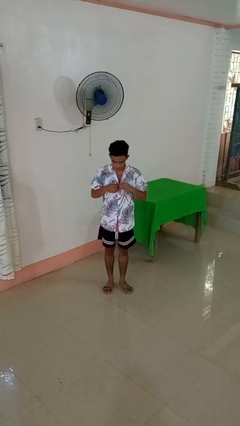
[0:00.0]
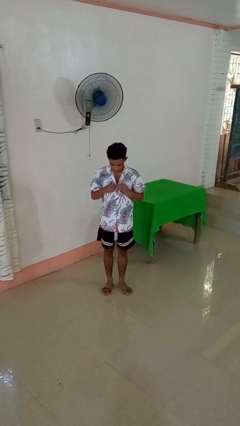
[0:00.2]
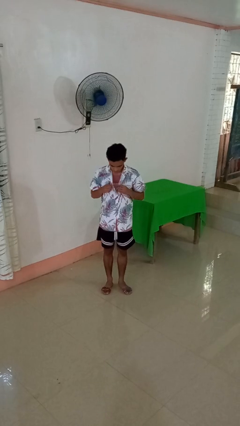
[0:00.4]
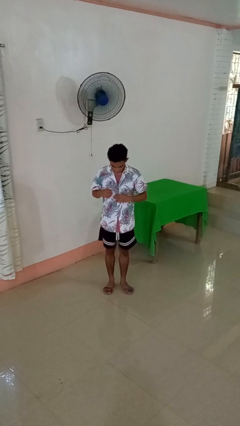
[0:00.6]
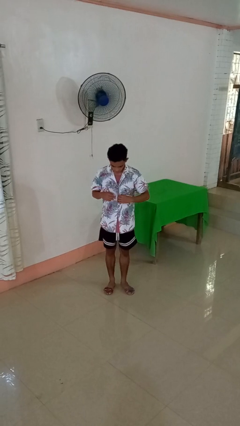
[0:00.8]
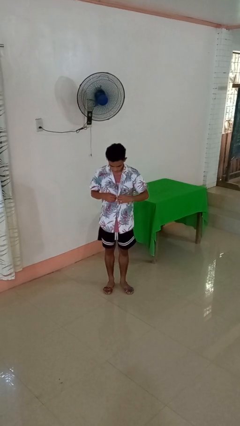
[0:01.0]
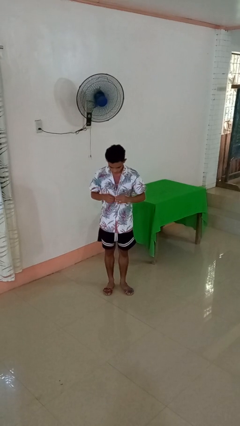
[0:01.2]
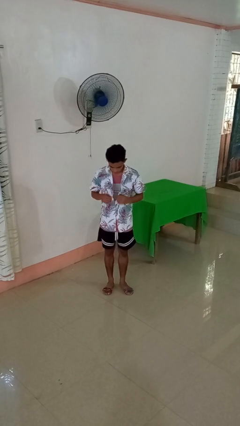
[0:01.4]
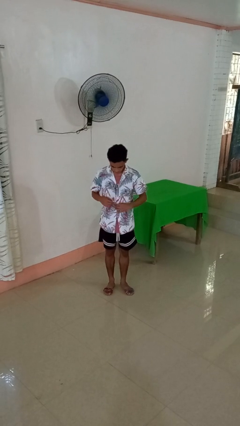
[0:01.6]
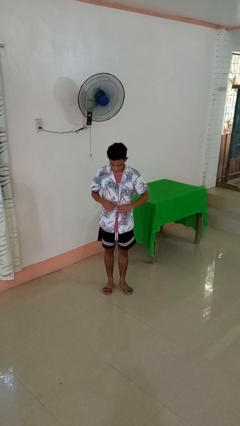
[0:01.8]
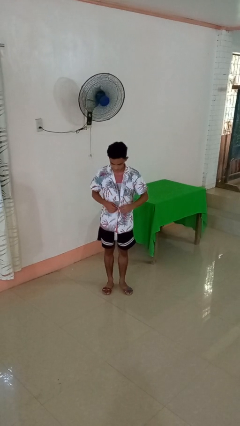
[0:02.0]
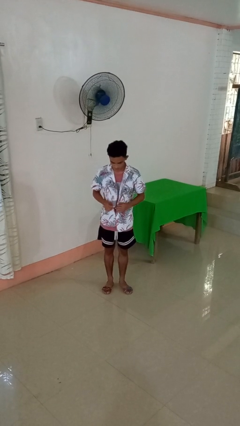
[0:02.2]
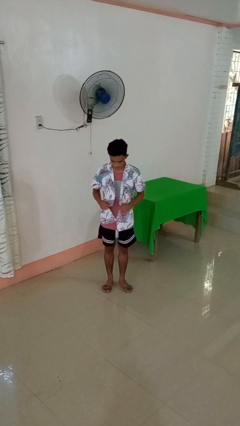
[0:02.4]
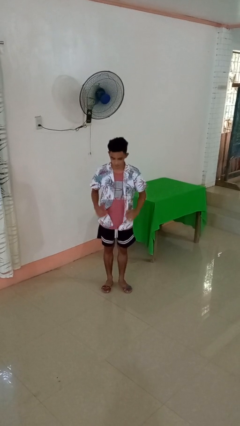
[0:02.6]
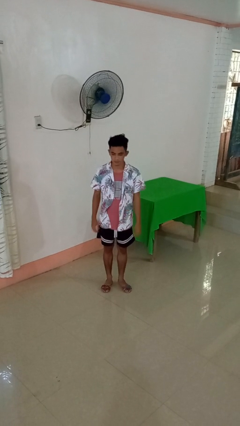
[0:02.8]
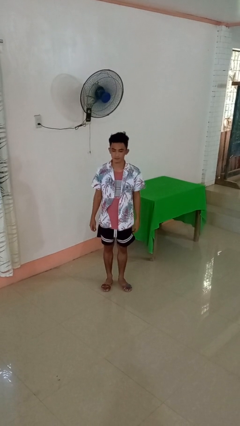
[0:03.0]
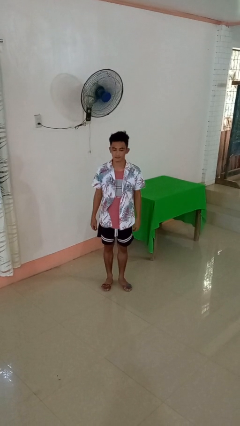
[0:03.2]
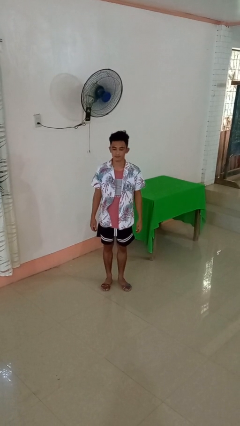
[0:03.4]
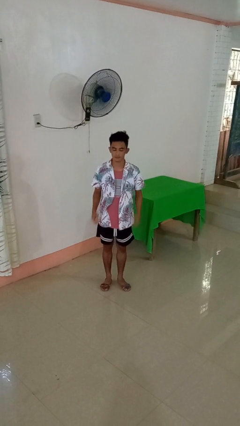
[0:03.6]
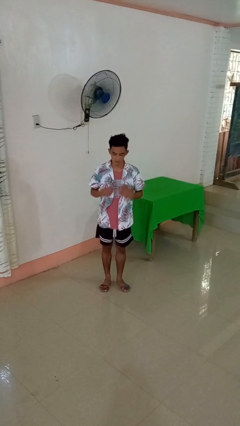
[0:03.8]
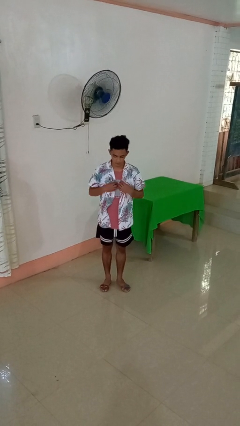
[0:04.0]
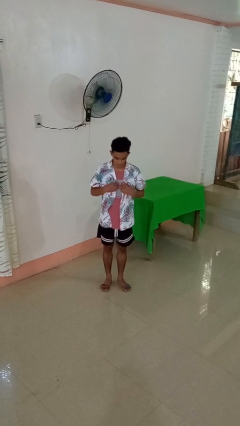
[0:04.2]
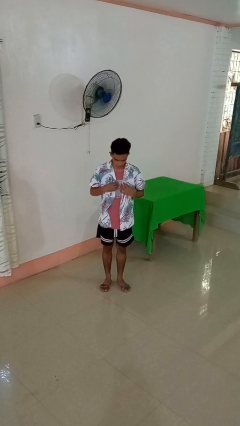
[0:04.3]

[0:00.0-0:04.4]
person unbuttons shirt

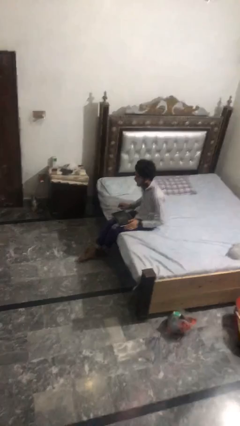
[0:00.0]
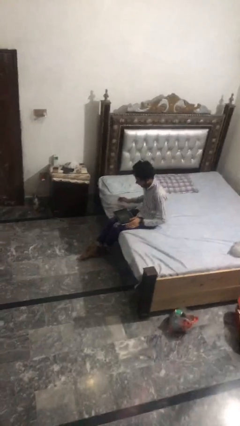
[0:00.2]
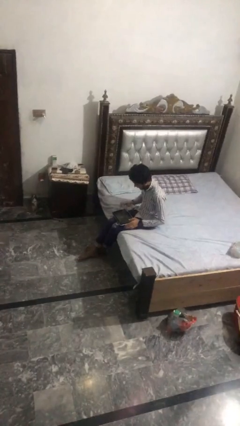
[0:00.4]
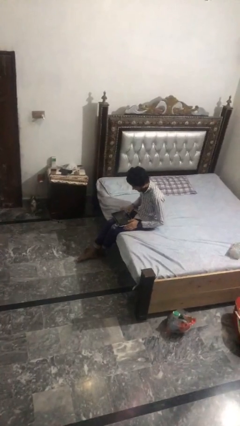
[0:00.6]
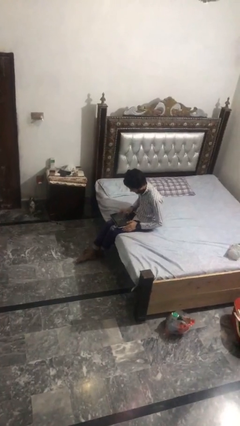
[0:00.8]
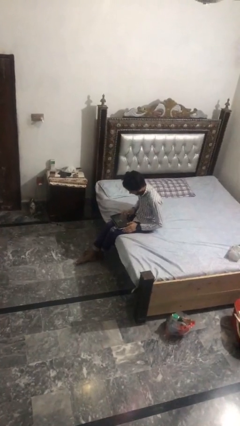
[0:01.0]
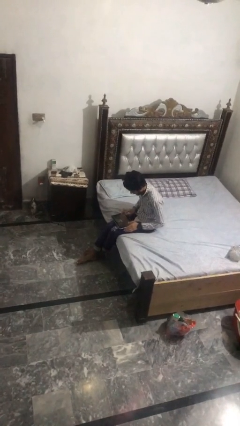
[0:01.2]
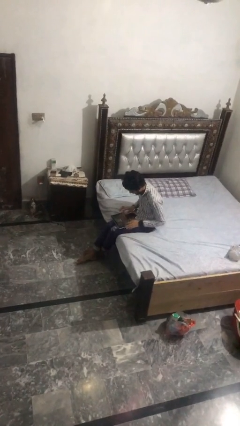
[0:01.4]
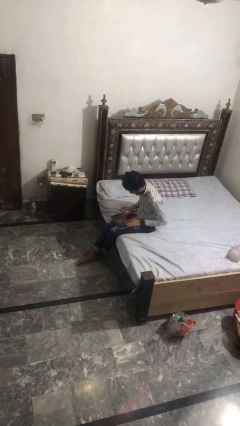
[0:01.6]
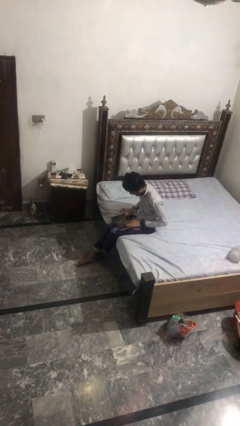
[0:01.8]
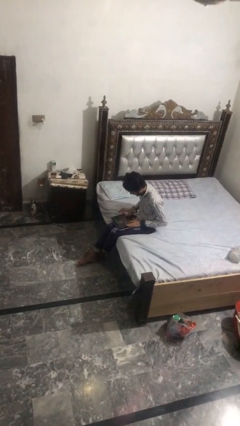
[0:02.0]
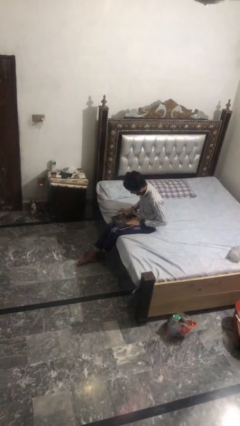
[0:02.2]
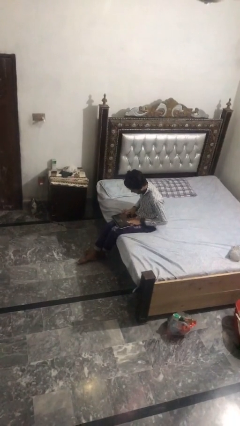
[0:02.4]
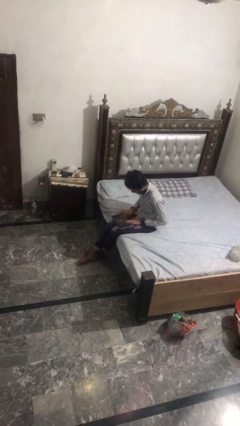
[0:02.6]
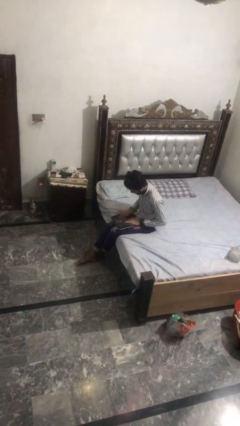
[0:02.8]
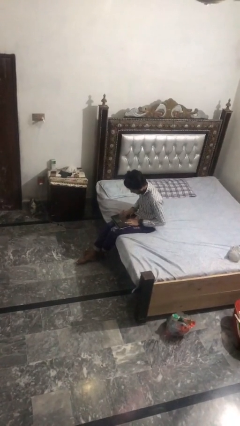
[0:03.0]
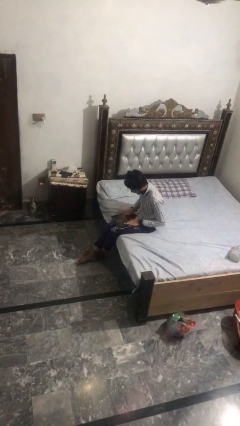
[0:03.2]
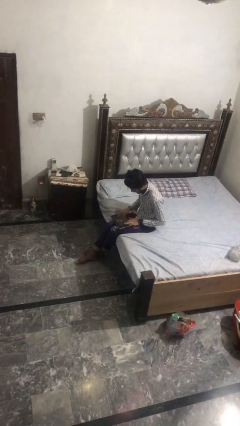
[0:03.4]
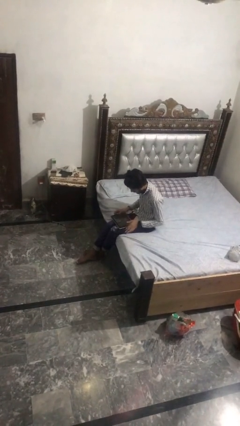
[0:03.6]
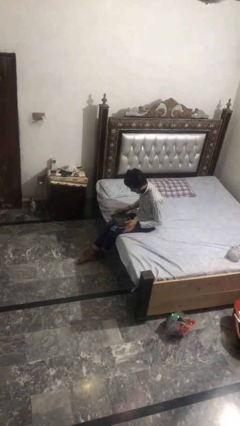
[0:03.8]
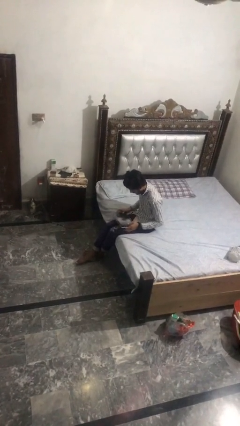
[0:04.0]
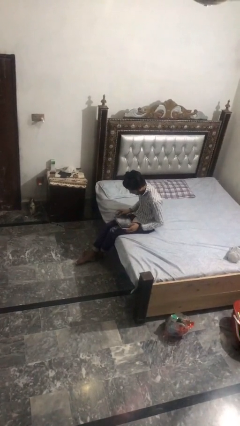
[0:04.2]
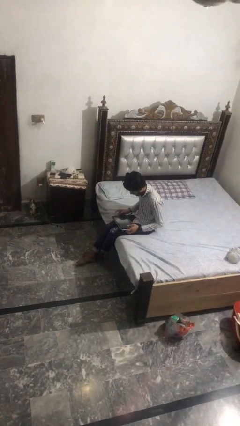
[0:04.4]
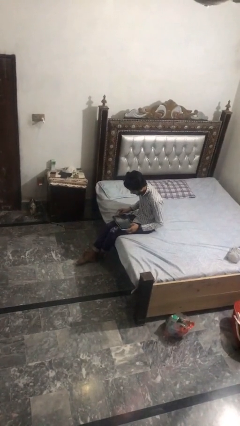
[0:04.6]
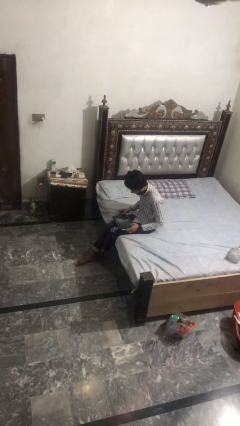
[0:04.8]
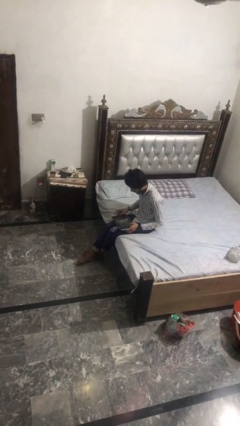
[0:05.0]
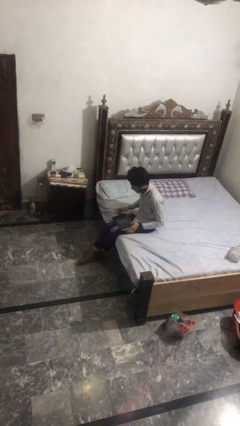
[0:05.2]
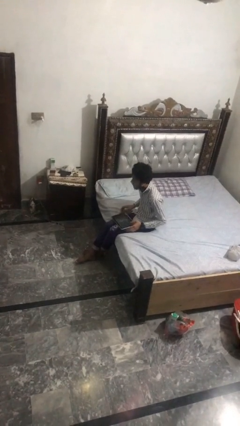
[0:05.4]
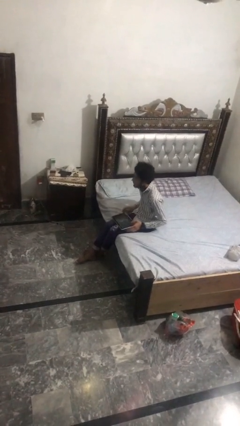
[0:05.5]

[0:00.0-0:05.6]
person interacts with tablet

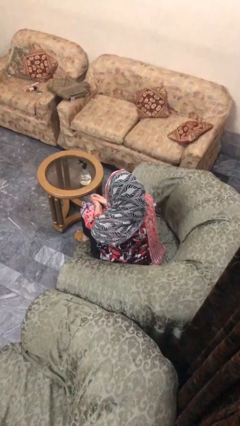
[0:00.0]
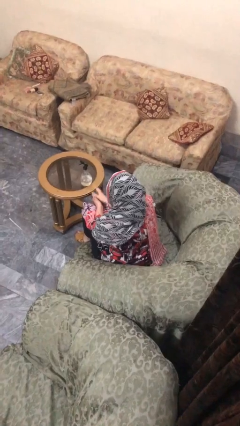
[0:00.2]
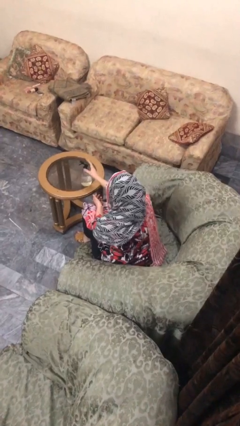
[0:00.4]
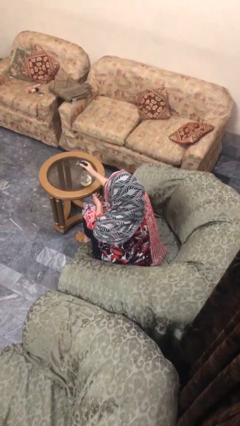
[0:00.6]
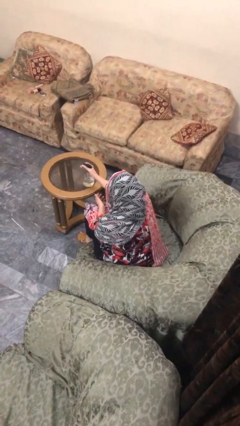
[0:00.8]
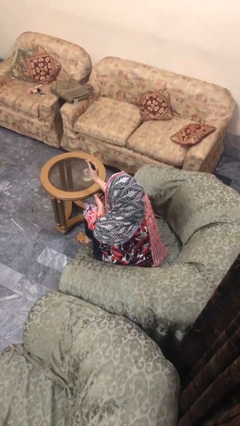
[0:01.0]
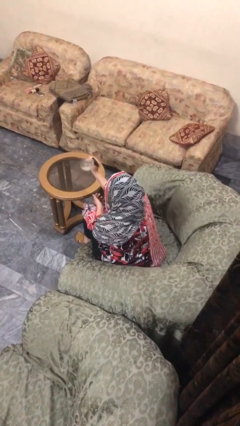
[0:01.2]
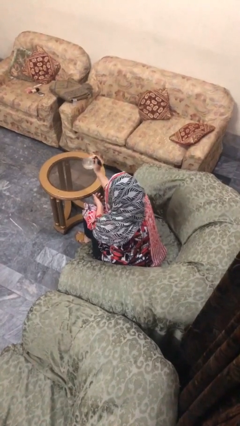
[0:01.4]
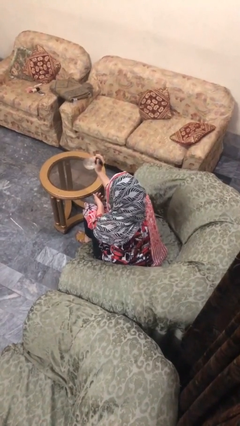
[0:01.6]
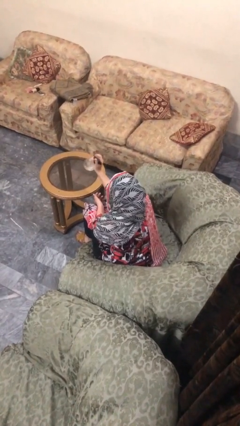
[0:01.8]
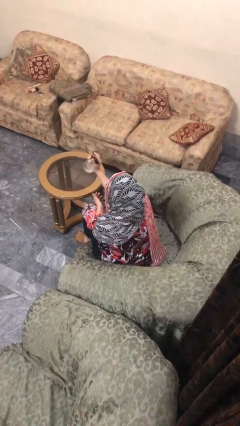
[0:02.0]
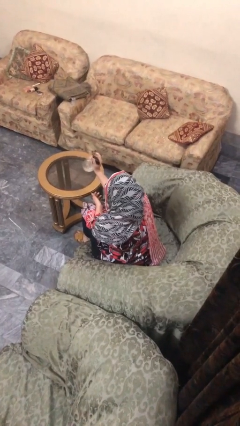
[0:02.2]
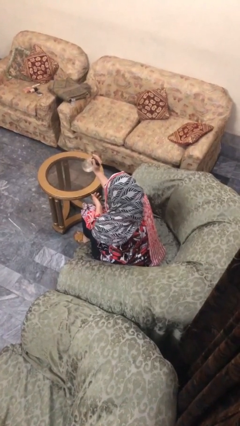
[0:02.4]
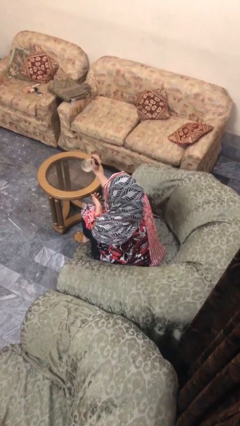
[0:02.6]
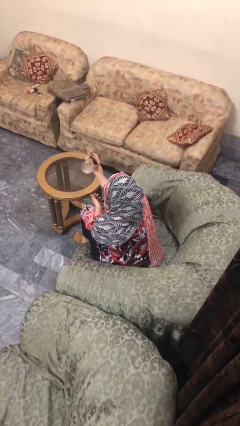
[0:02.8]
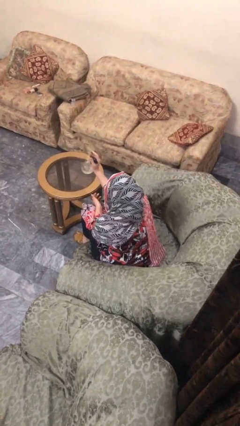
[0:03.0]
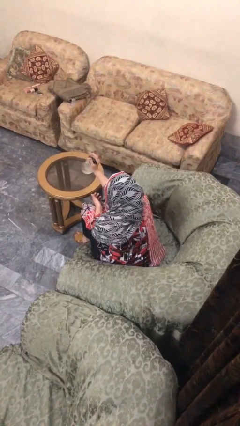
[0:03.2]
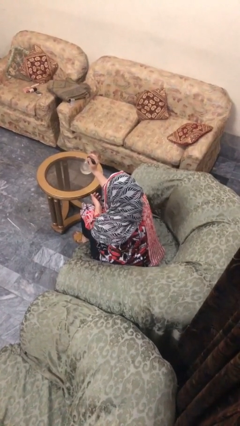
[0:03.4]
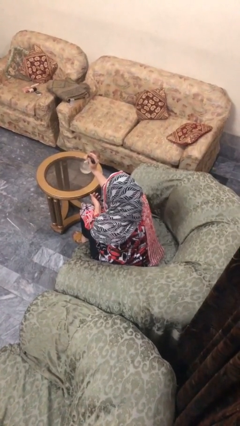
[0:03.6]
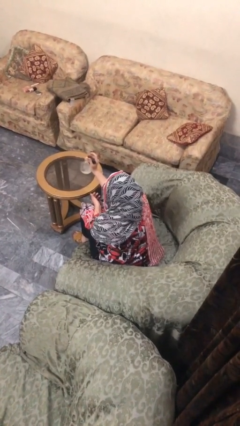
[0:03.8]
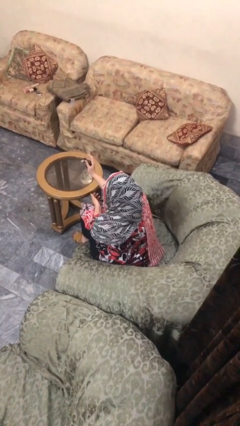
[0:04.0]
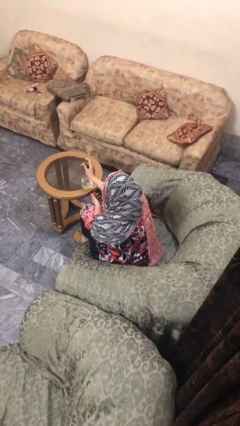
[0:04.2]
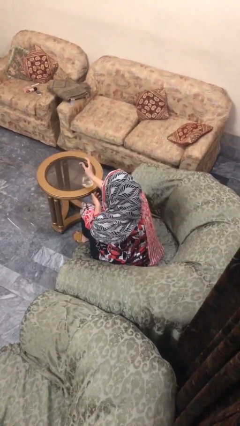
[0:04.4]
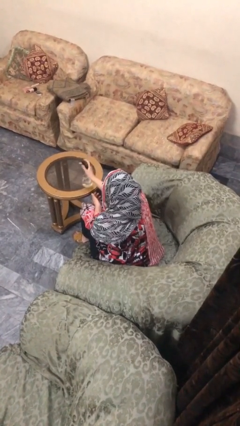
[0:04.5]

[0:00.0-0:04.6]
person sprays from bottle

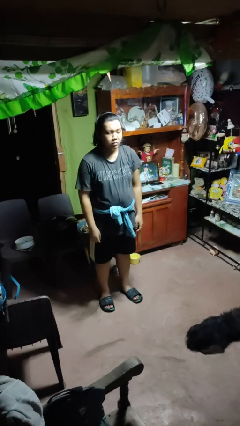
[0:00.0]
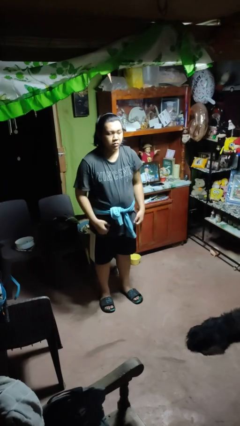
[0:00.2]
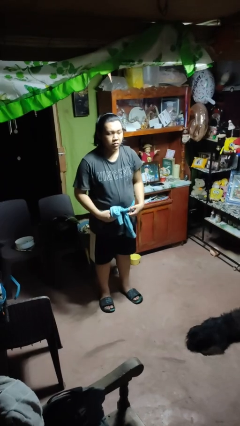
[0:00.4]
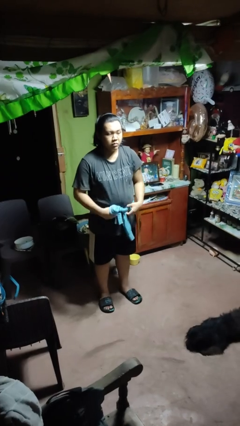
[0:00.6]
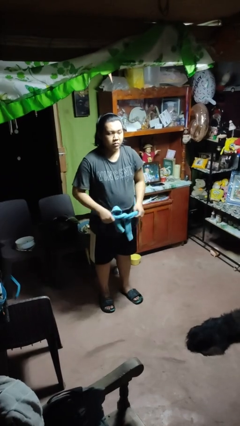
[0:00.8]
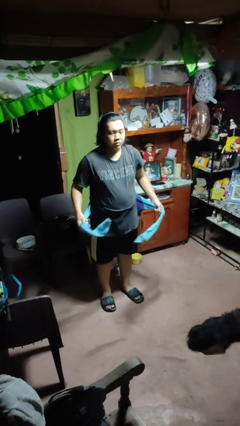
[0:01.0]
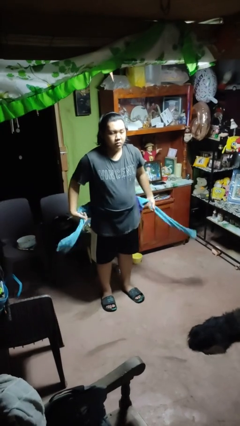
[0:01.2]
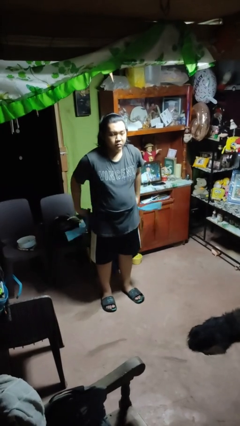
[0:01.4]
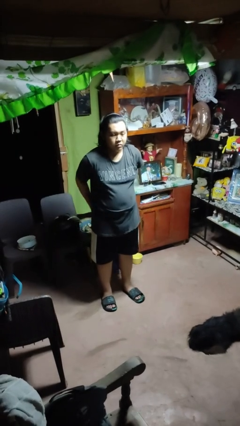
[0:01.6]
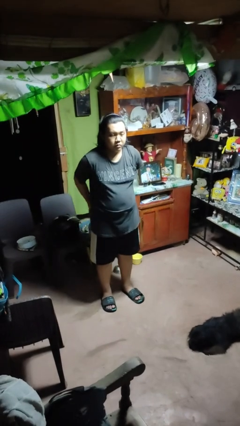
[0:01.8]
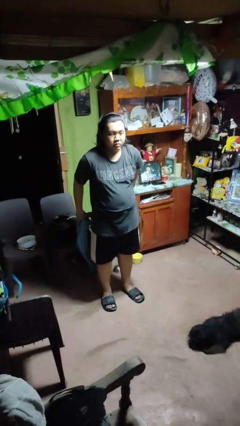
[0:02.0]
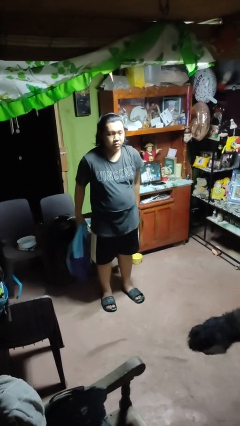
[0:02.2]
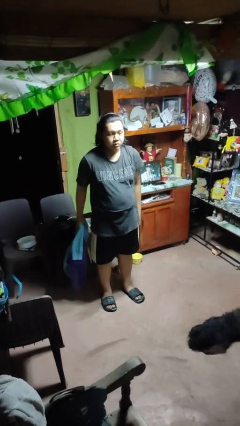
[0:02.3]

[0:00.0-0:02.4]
person unties jacket around waist

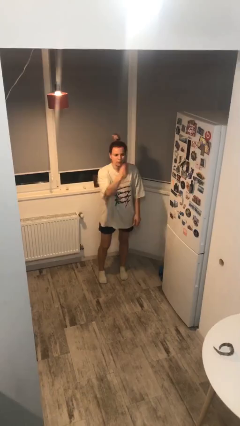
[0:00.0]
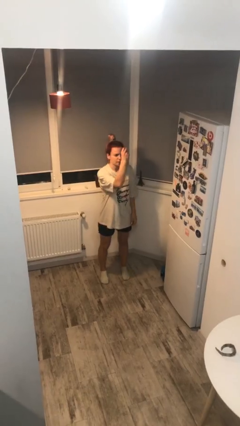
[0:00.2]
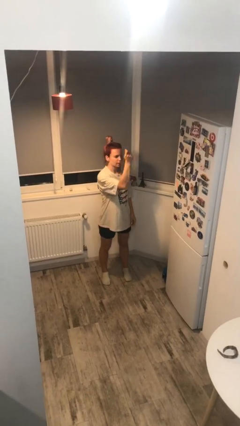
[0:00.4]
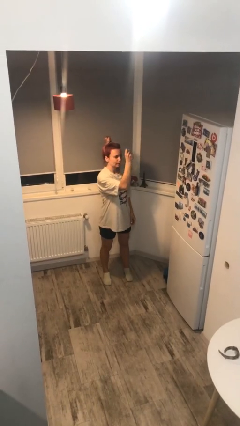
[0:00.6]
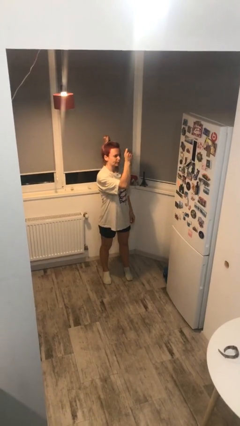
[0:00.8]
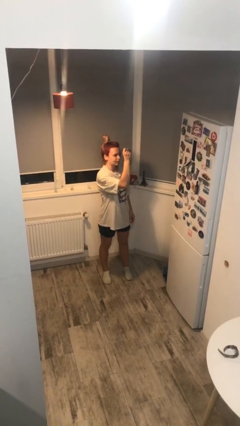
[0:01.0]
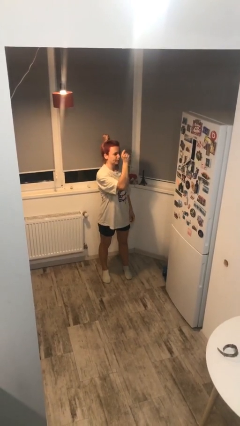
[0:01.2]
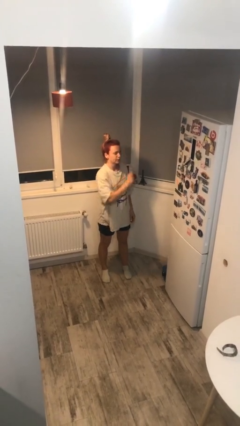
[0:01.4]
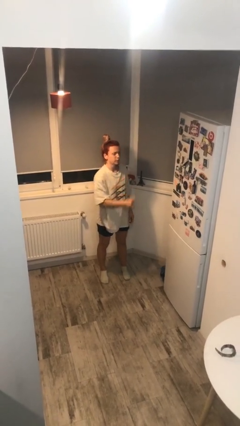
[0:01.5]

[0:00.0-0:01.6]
person snaps fingers
